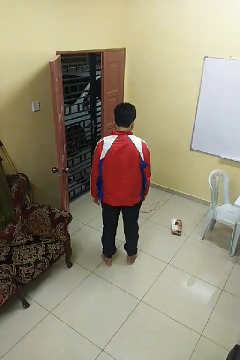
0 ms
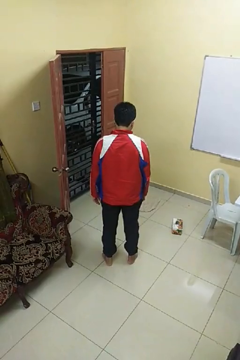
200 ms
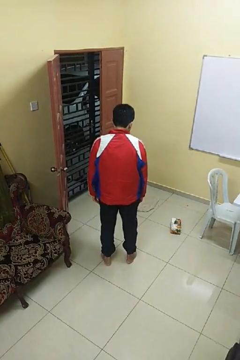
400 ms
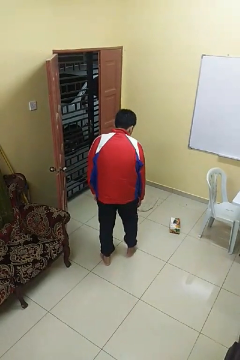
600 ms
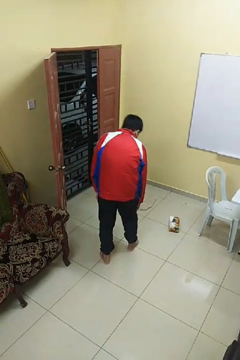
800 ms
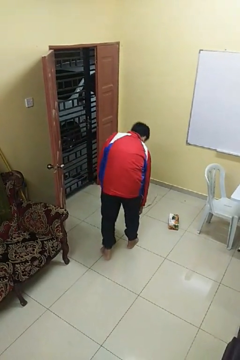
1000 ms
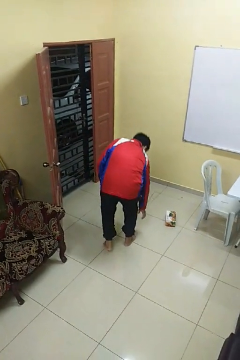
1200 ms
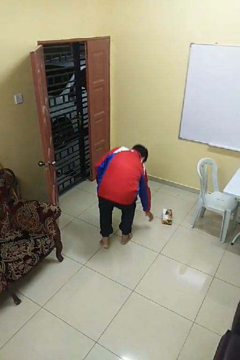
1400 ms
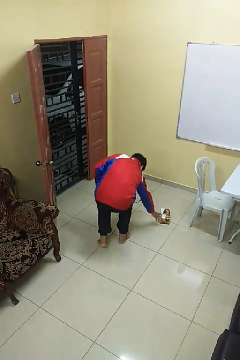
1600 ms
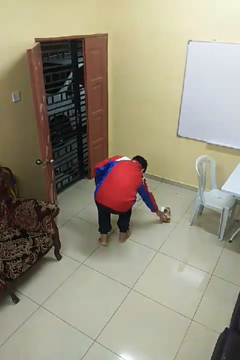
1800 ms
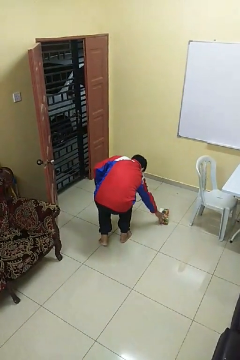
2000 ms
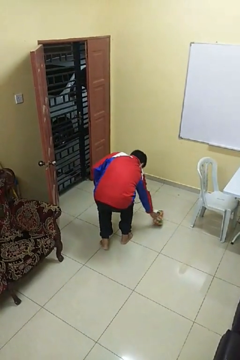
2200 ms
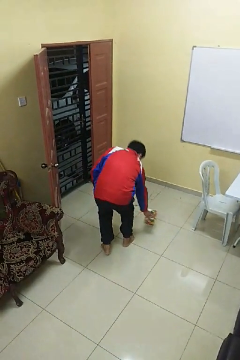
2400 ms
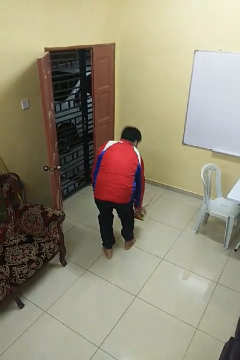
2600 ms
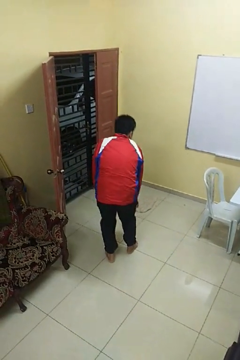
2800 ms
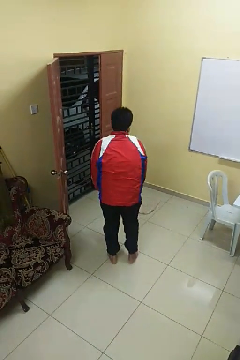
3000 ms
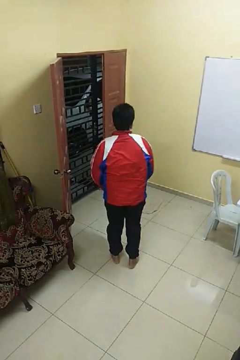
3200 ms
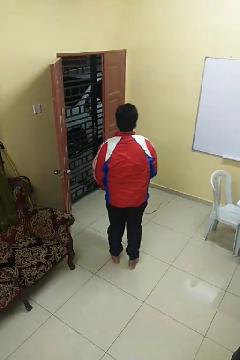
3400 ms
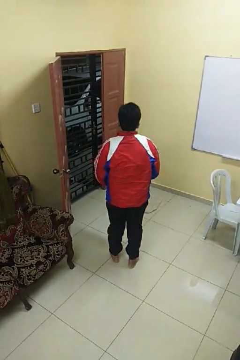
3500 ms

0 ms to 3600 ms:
person picks up object from floor

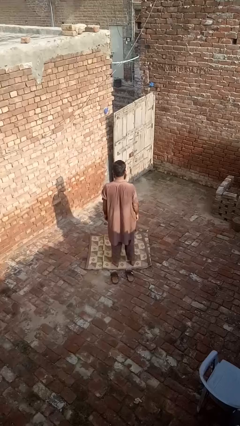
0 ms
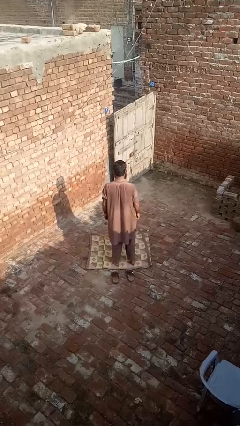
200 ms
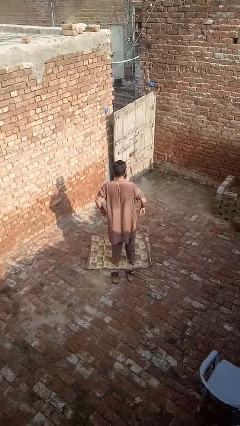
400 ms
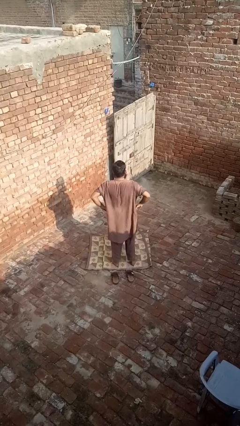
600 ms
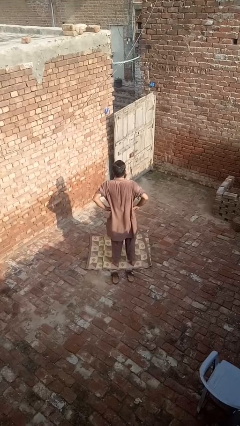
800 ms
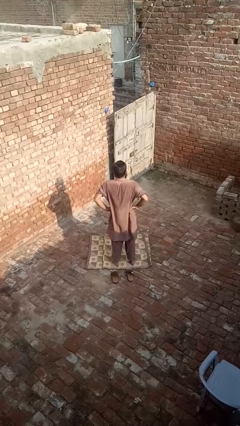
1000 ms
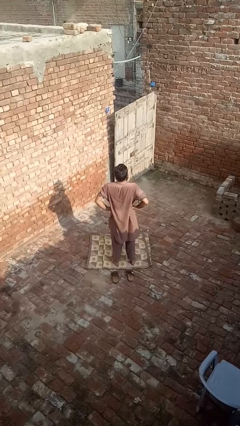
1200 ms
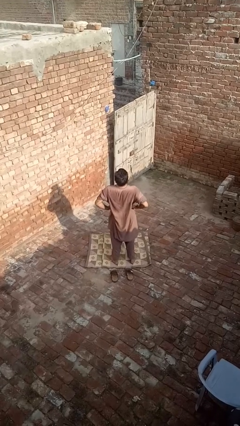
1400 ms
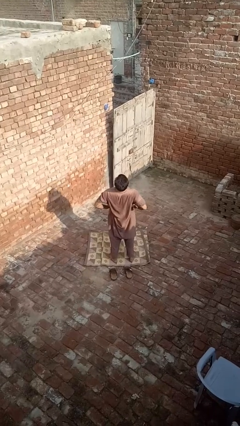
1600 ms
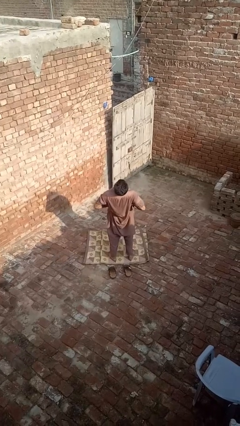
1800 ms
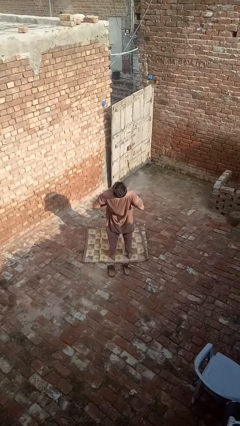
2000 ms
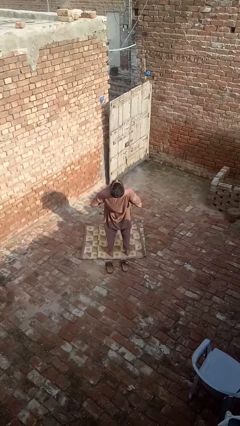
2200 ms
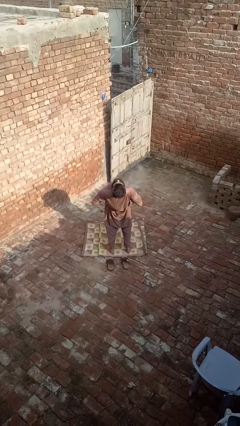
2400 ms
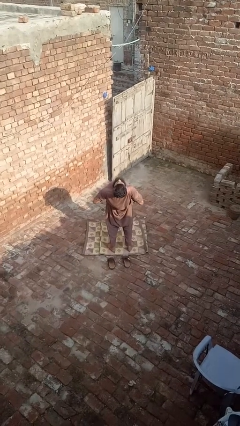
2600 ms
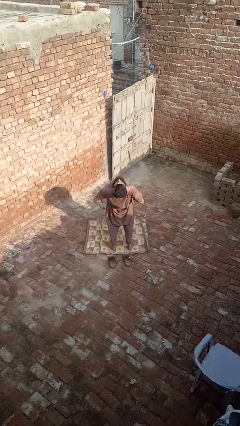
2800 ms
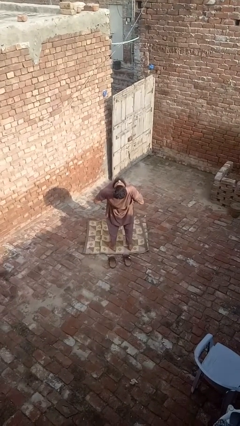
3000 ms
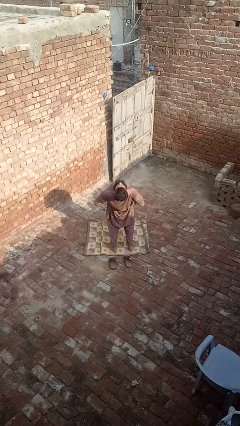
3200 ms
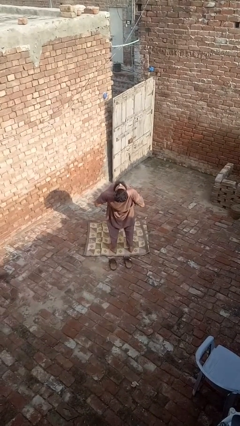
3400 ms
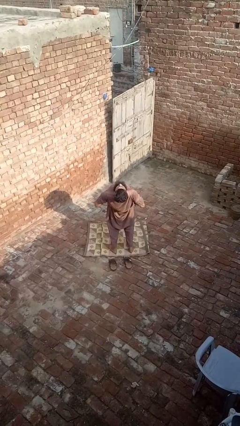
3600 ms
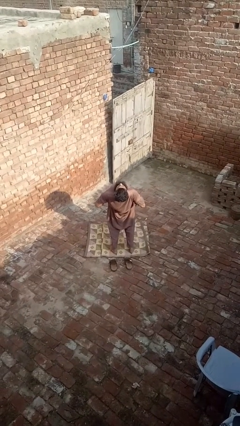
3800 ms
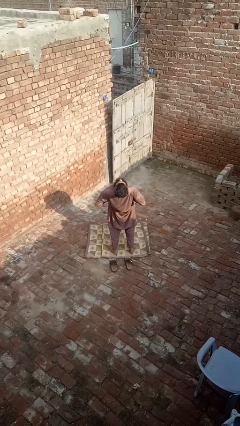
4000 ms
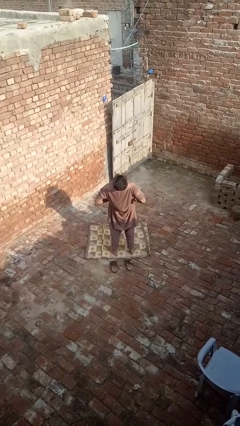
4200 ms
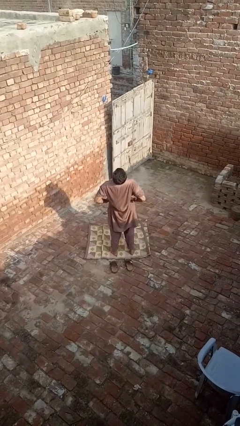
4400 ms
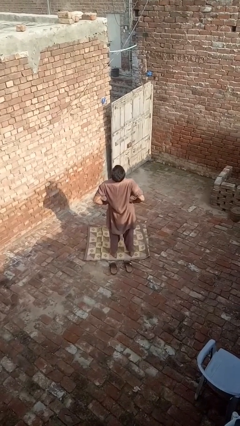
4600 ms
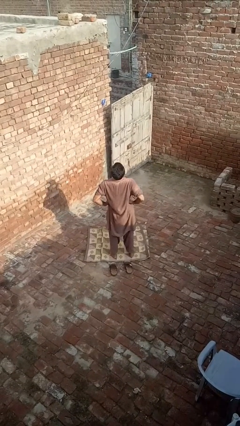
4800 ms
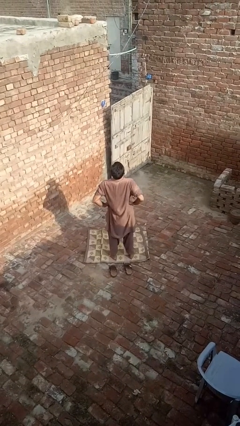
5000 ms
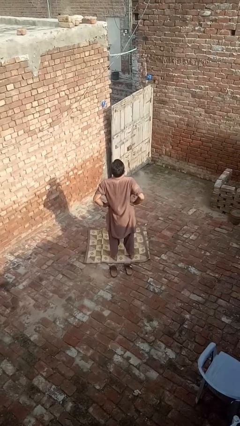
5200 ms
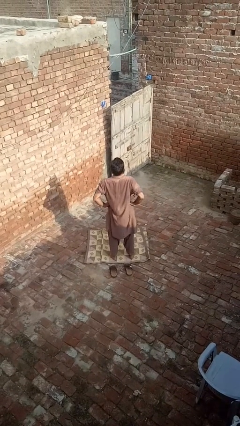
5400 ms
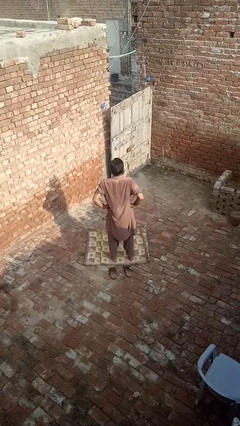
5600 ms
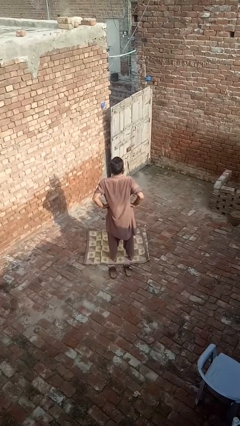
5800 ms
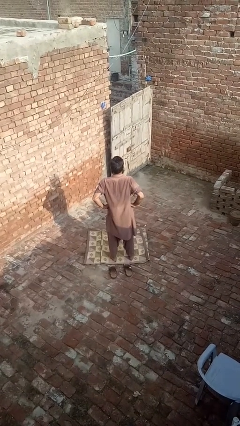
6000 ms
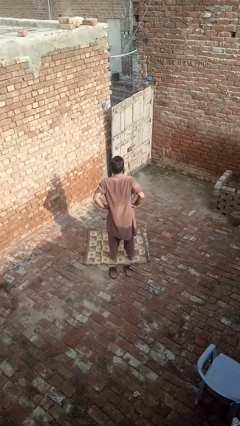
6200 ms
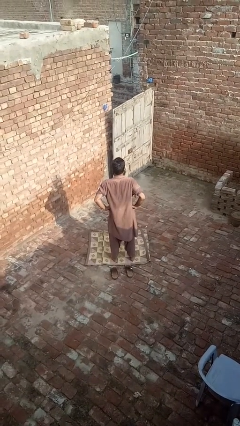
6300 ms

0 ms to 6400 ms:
person stretches back

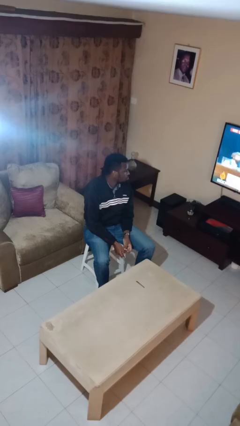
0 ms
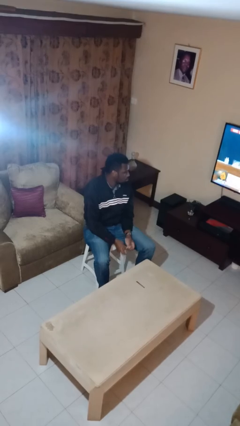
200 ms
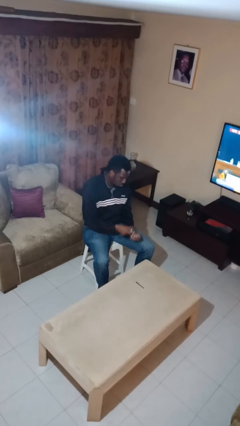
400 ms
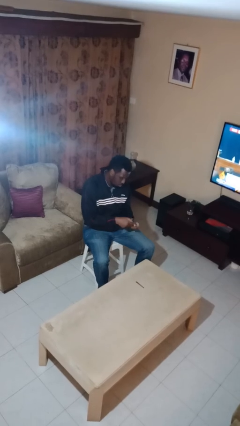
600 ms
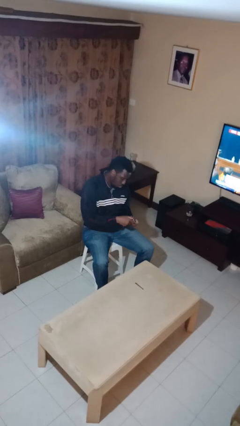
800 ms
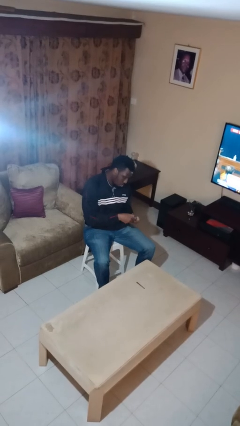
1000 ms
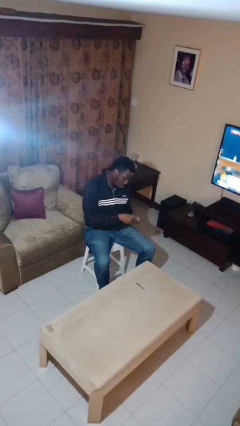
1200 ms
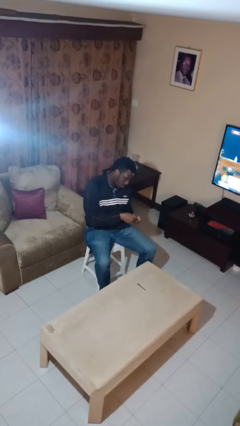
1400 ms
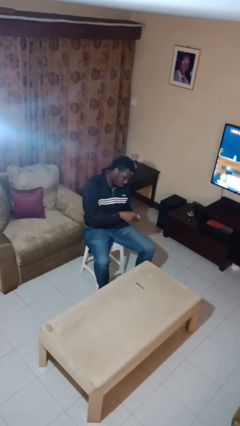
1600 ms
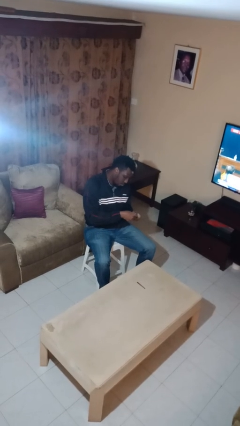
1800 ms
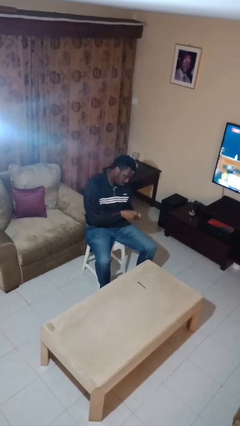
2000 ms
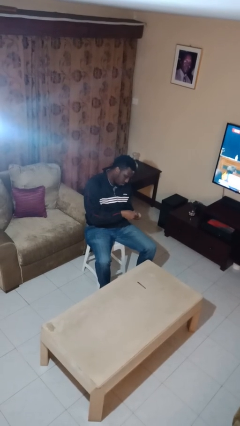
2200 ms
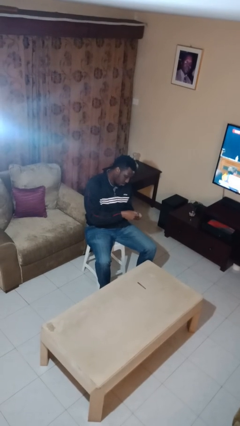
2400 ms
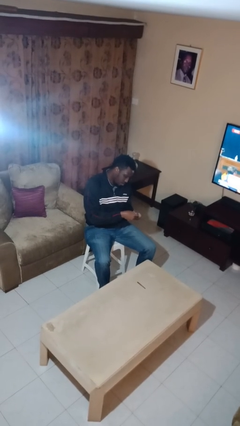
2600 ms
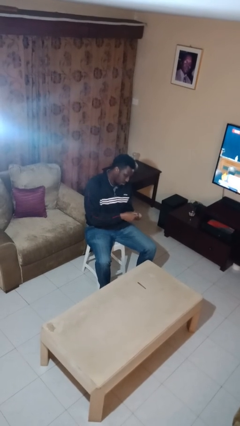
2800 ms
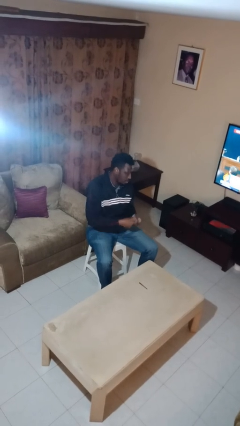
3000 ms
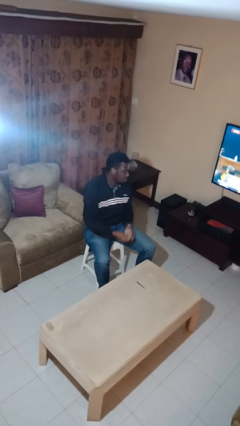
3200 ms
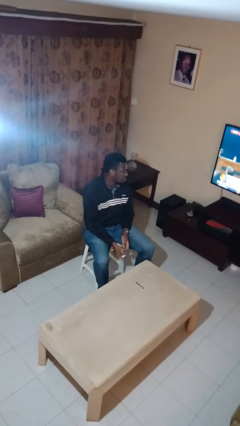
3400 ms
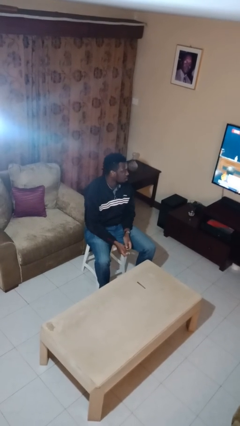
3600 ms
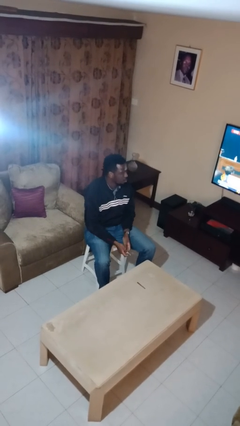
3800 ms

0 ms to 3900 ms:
person clips fingernails

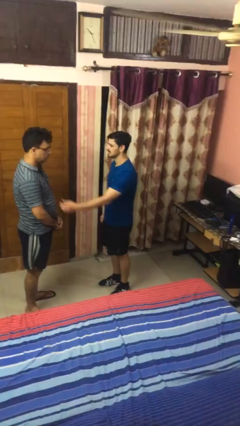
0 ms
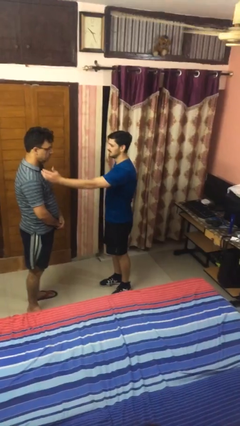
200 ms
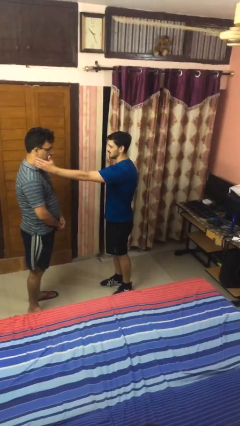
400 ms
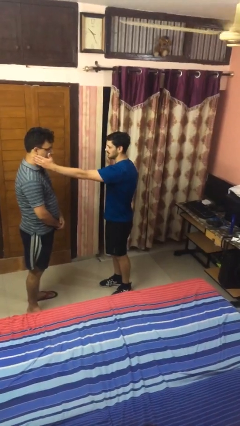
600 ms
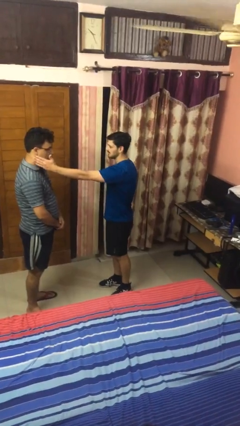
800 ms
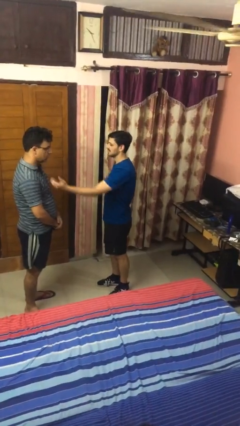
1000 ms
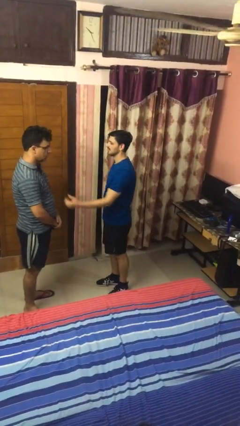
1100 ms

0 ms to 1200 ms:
person touches face of person

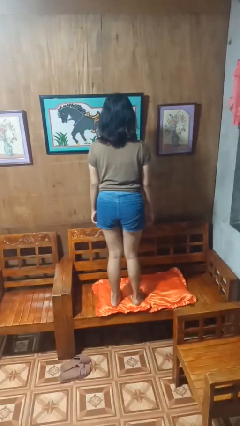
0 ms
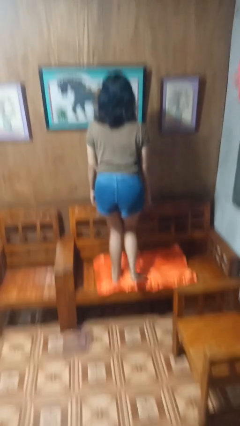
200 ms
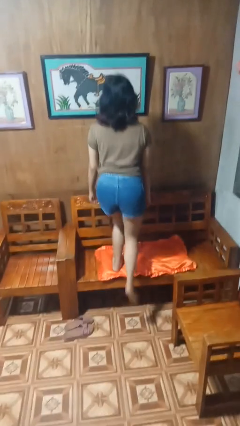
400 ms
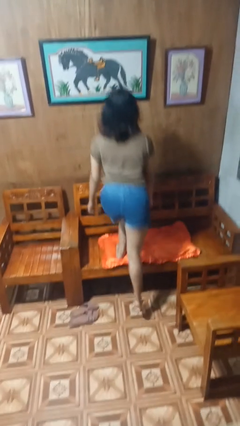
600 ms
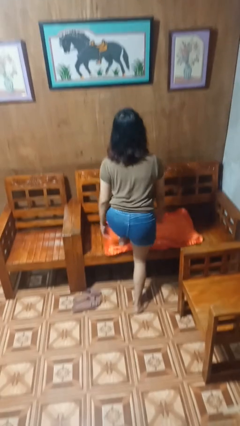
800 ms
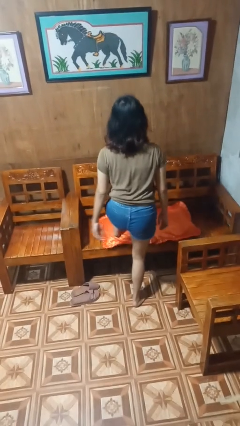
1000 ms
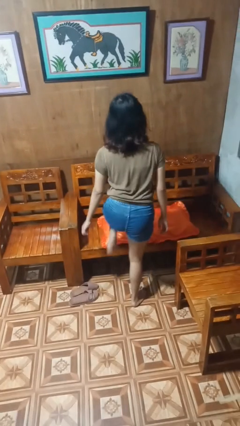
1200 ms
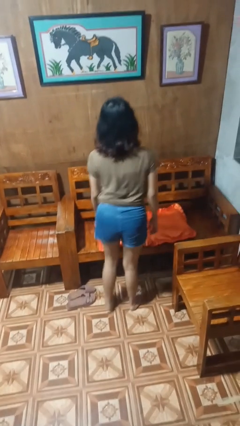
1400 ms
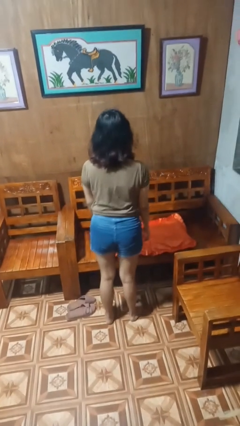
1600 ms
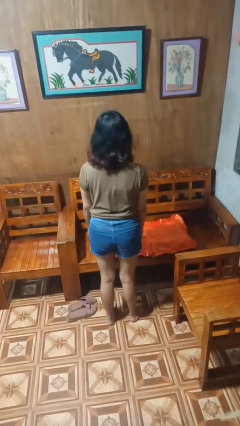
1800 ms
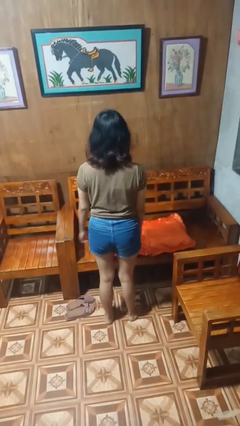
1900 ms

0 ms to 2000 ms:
person climbs off couch

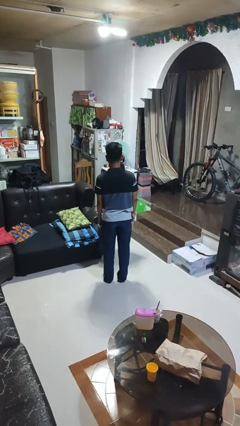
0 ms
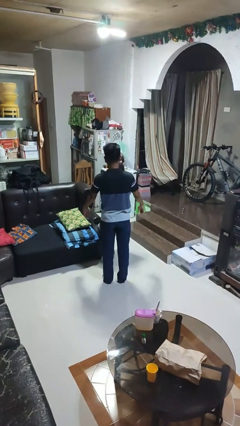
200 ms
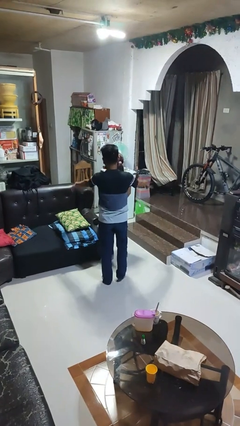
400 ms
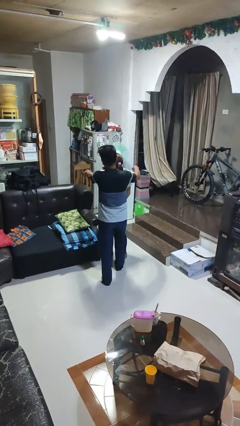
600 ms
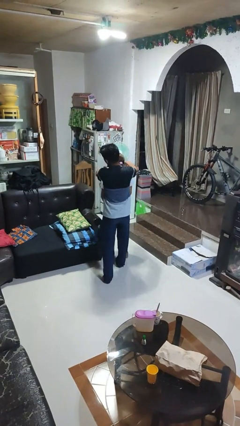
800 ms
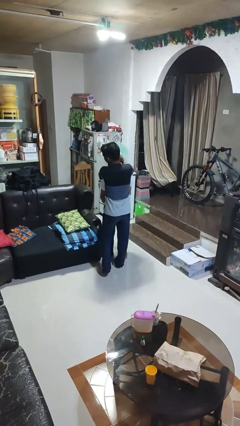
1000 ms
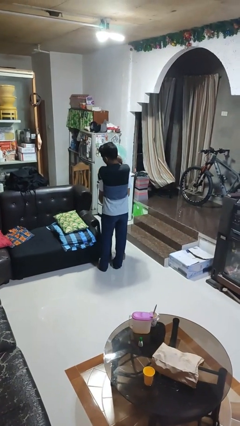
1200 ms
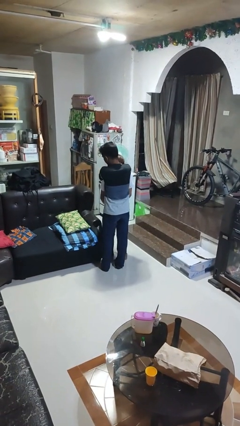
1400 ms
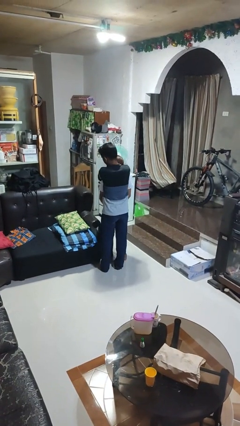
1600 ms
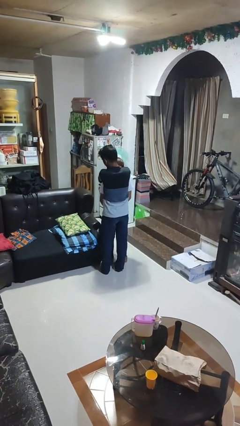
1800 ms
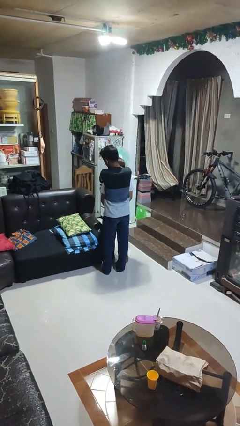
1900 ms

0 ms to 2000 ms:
person hugs person from behind
